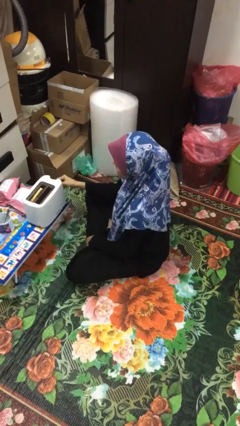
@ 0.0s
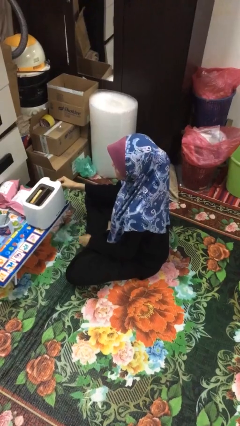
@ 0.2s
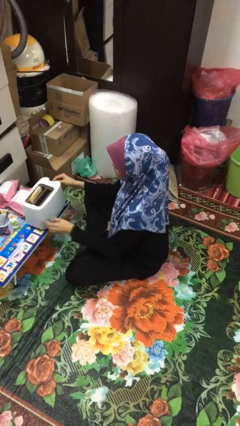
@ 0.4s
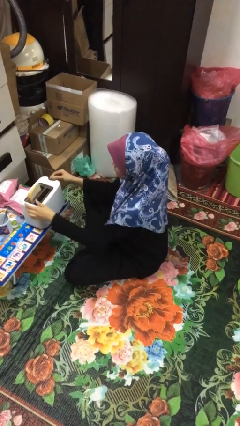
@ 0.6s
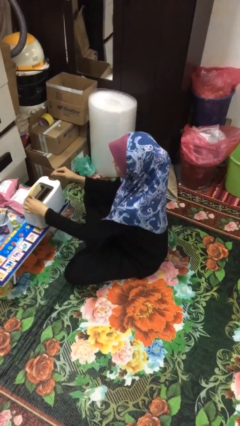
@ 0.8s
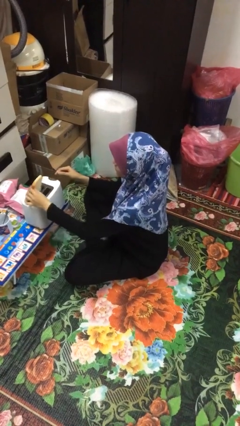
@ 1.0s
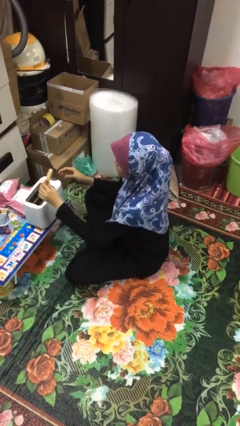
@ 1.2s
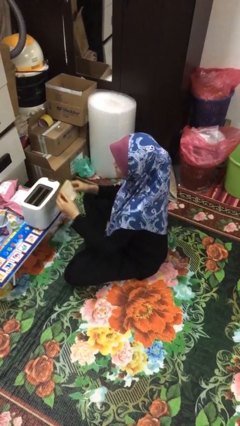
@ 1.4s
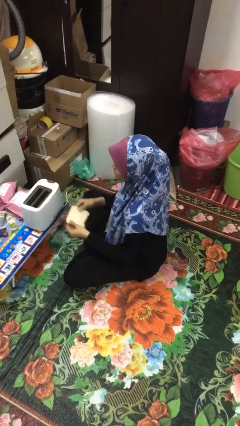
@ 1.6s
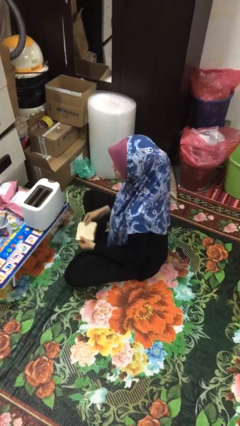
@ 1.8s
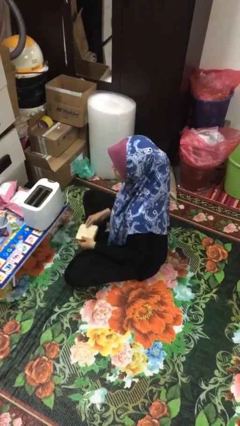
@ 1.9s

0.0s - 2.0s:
person takes object from toaster

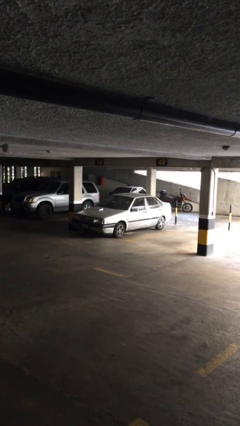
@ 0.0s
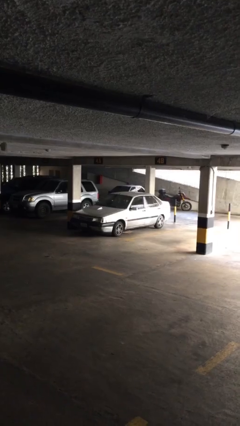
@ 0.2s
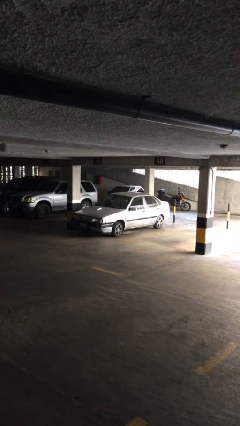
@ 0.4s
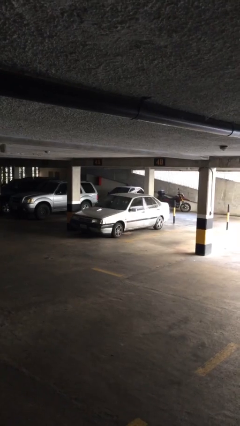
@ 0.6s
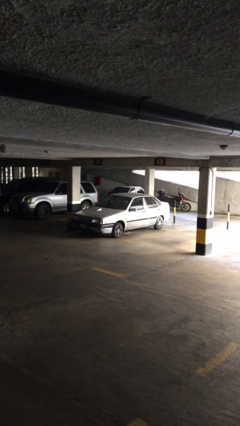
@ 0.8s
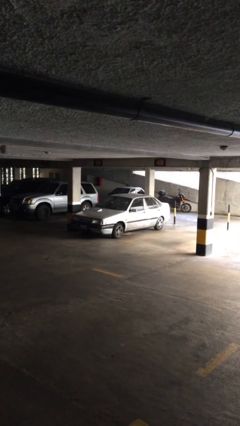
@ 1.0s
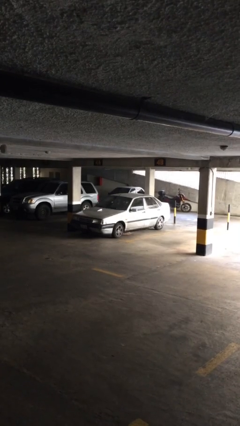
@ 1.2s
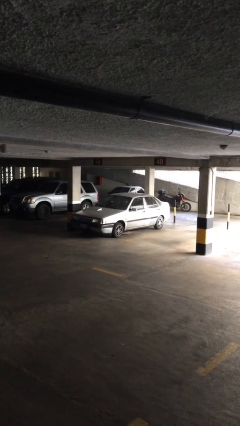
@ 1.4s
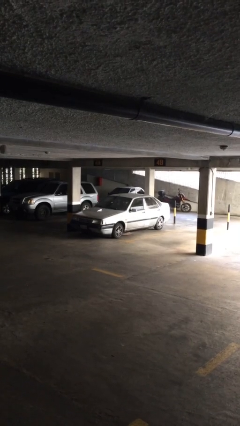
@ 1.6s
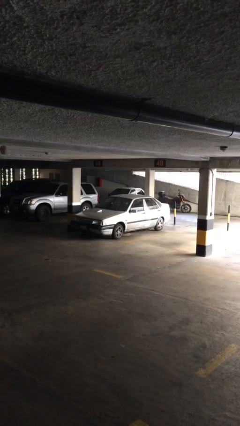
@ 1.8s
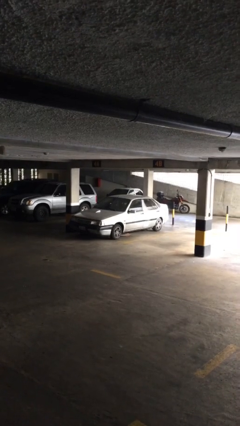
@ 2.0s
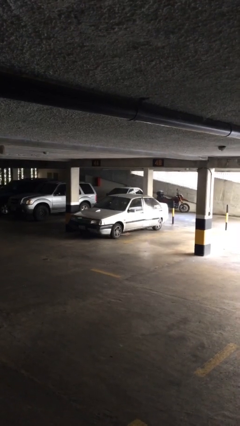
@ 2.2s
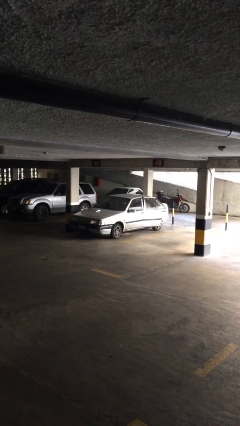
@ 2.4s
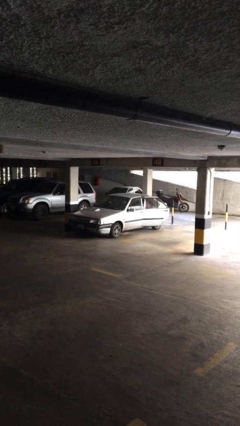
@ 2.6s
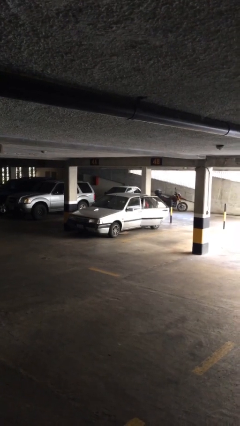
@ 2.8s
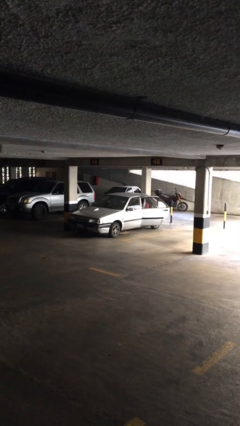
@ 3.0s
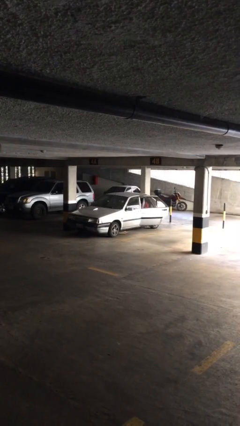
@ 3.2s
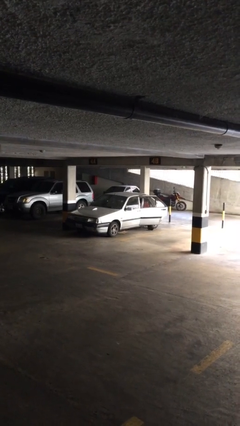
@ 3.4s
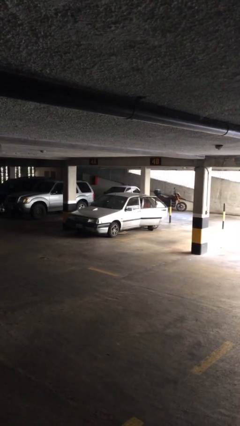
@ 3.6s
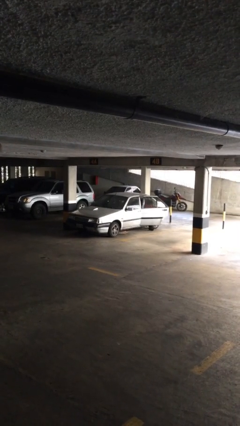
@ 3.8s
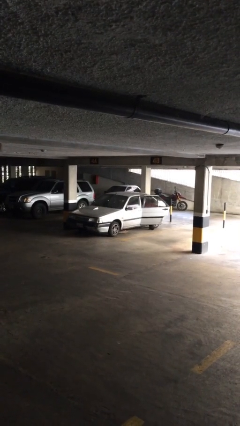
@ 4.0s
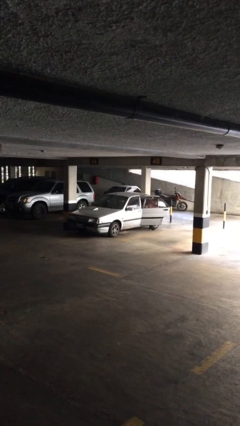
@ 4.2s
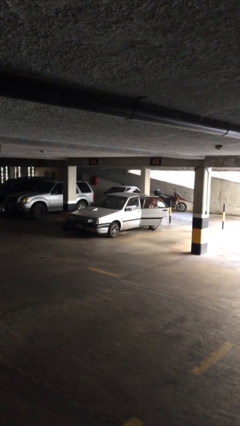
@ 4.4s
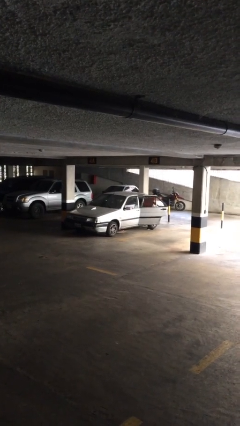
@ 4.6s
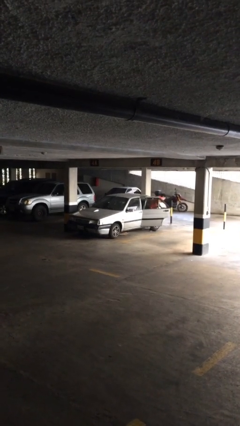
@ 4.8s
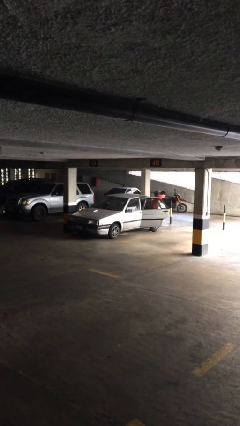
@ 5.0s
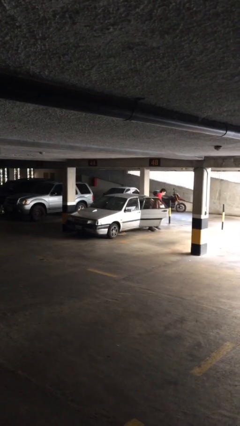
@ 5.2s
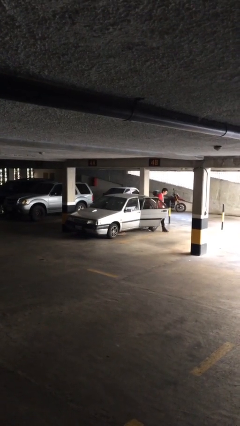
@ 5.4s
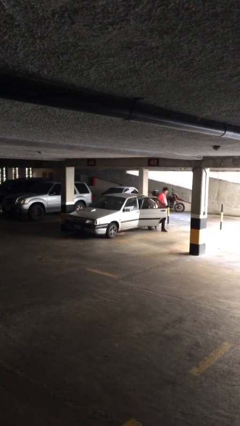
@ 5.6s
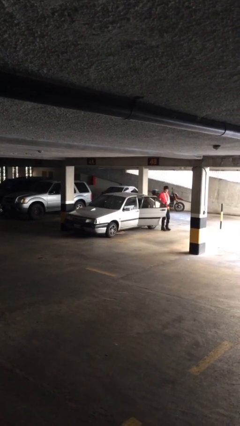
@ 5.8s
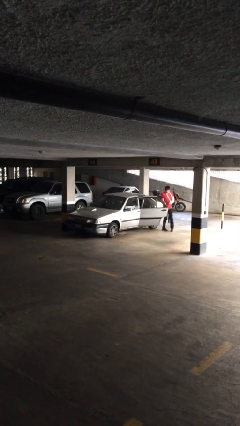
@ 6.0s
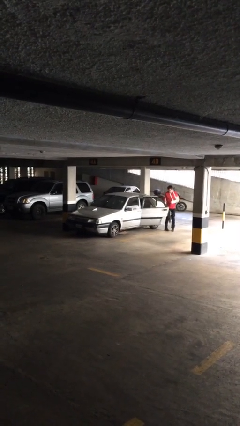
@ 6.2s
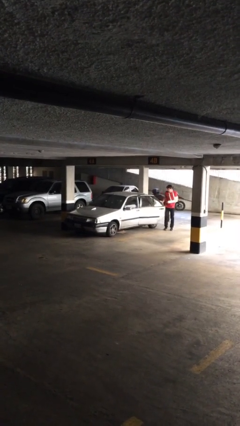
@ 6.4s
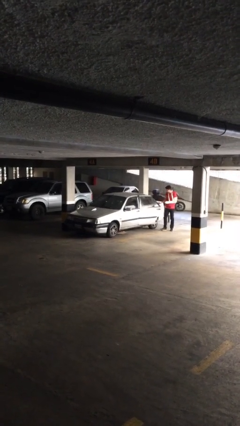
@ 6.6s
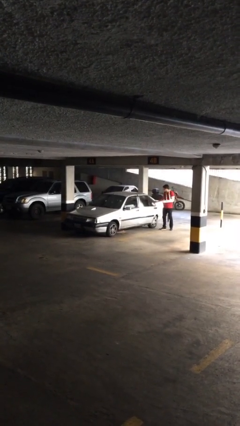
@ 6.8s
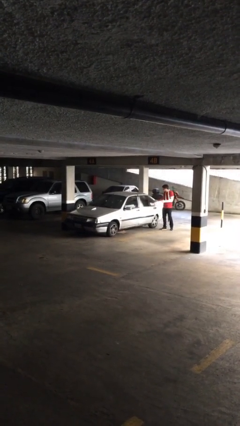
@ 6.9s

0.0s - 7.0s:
car drops off person

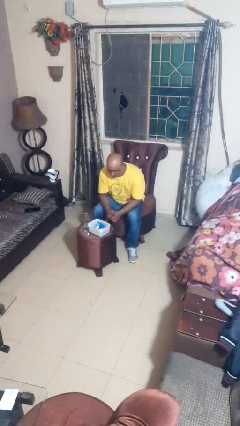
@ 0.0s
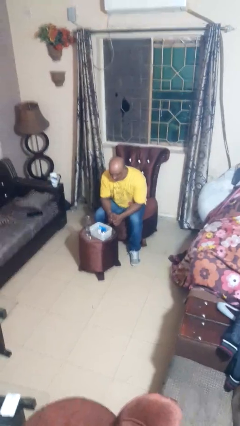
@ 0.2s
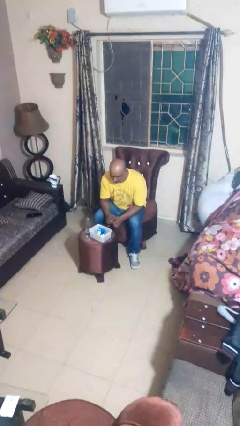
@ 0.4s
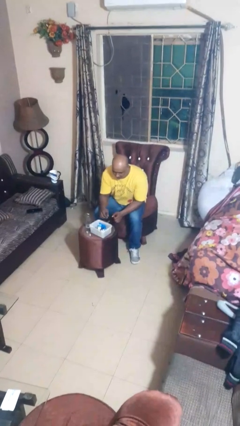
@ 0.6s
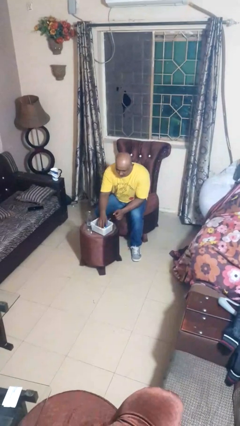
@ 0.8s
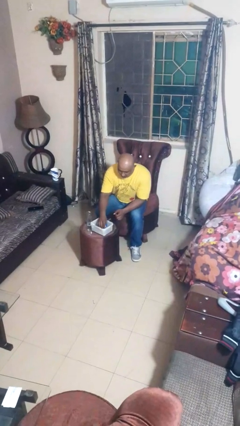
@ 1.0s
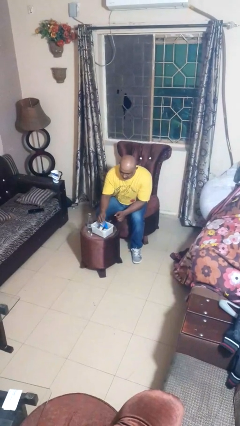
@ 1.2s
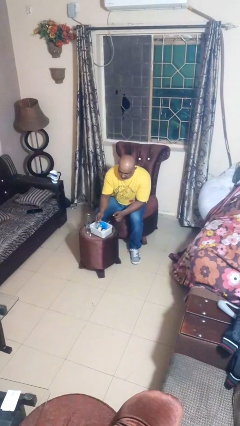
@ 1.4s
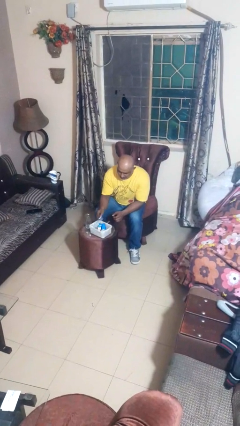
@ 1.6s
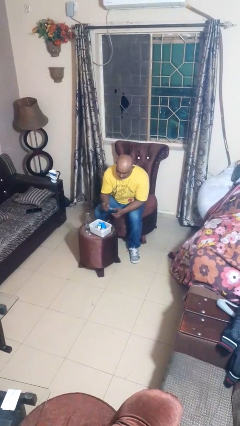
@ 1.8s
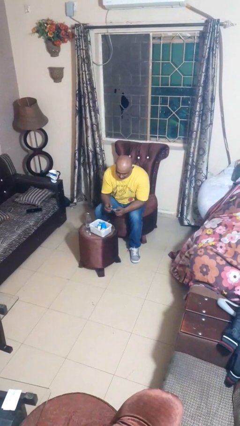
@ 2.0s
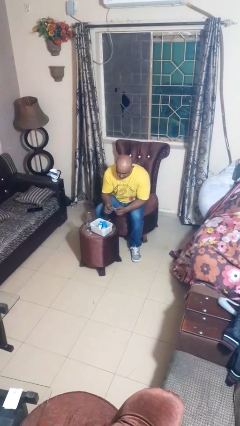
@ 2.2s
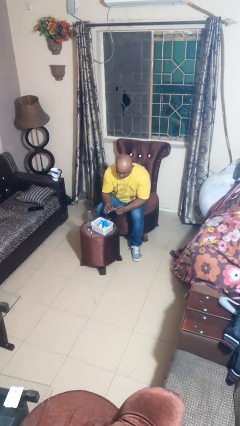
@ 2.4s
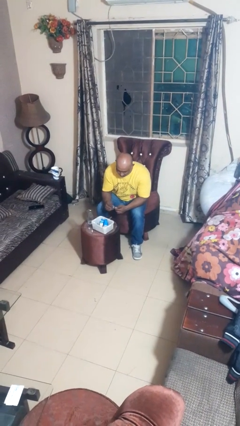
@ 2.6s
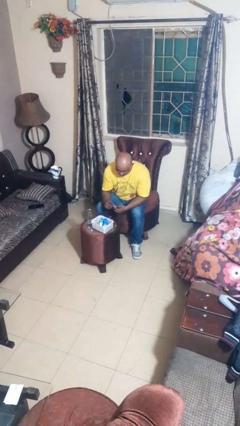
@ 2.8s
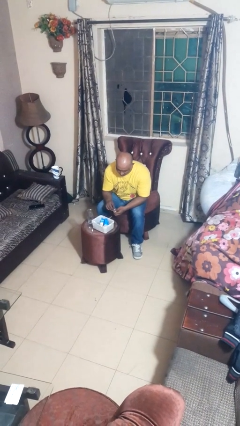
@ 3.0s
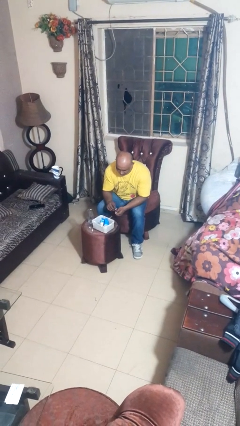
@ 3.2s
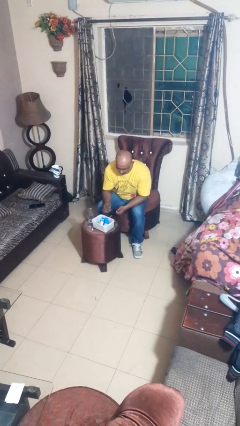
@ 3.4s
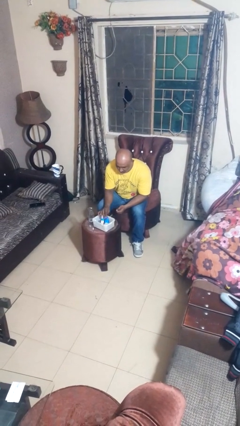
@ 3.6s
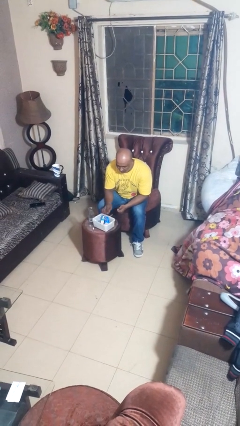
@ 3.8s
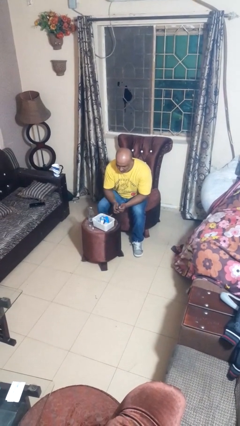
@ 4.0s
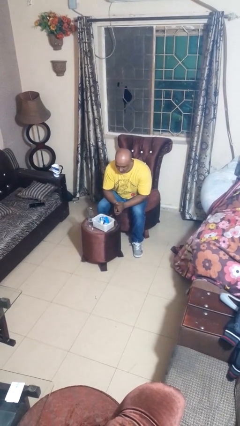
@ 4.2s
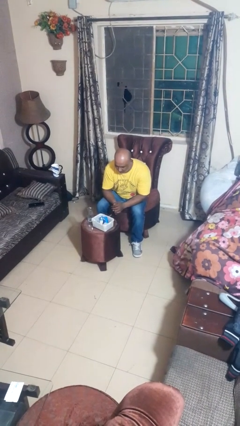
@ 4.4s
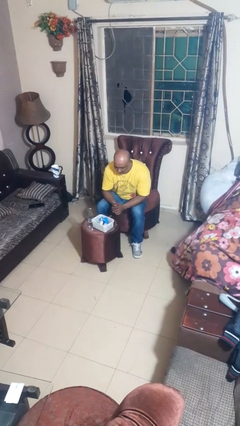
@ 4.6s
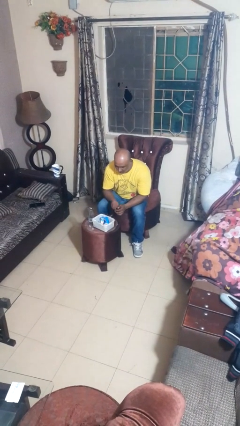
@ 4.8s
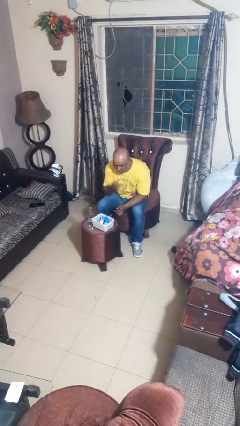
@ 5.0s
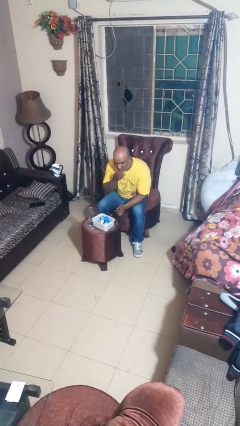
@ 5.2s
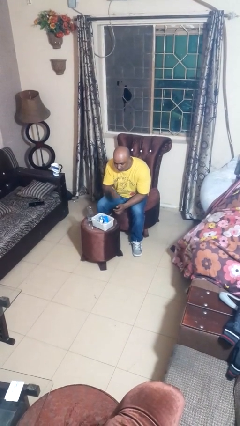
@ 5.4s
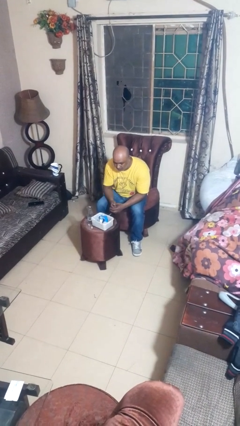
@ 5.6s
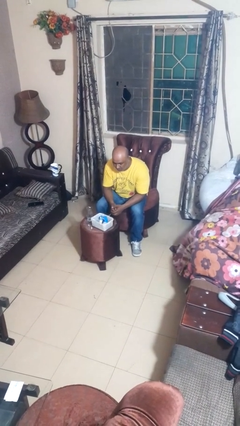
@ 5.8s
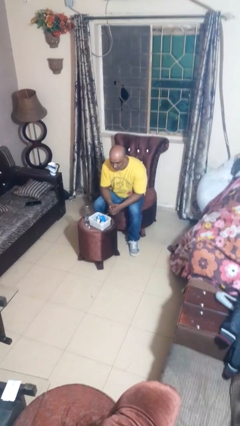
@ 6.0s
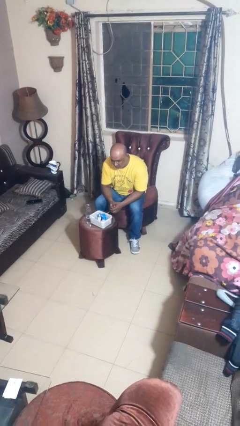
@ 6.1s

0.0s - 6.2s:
person takes medicine pills

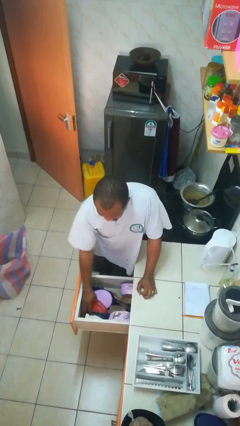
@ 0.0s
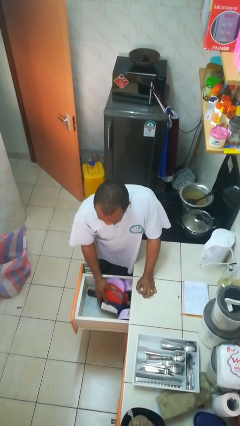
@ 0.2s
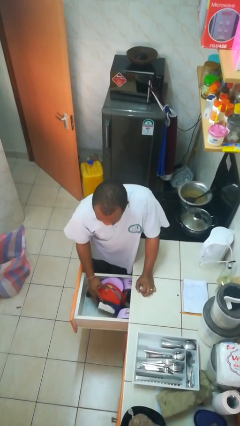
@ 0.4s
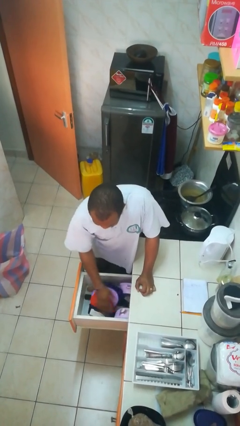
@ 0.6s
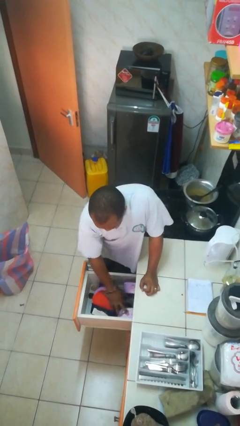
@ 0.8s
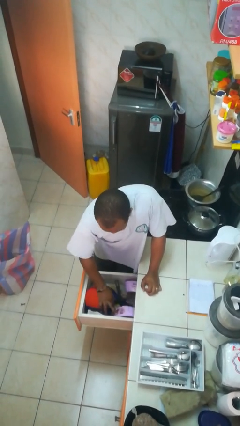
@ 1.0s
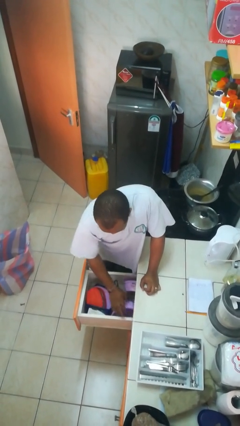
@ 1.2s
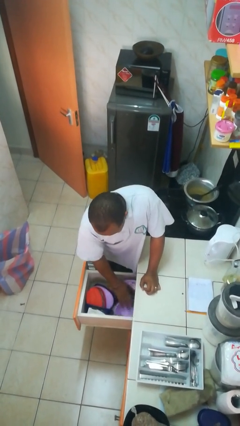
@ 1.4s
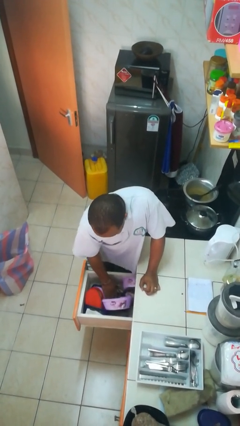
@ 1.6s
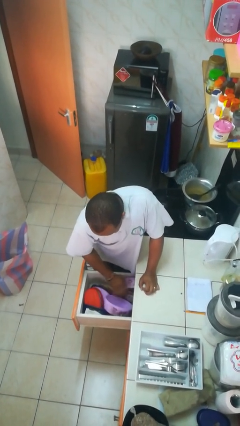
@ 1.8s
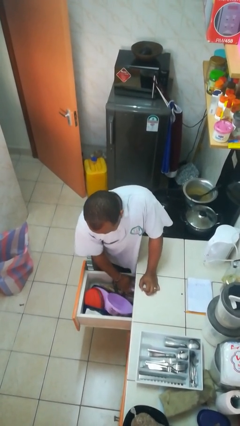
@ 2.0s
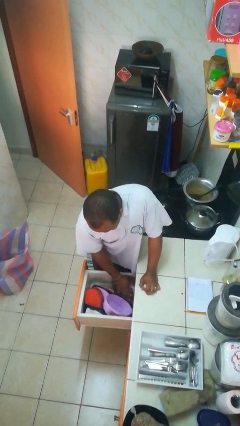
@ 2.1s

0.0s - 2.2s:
person searches in kitchen drawer
